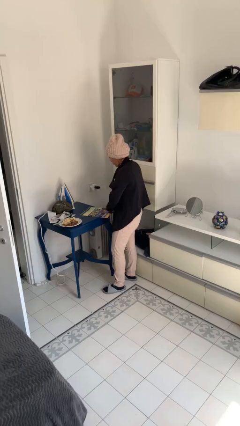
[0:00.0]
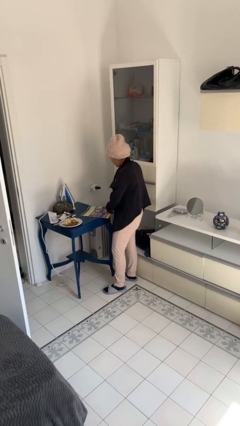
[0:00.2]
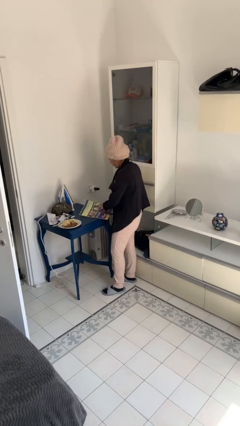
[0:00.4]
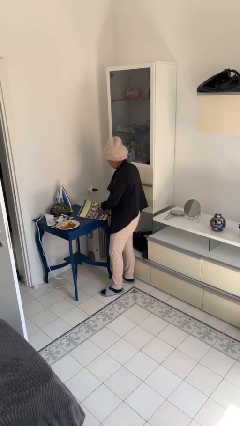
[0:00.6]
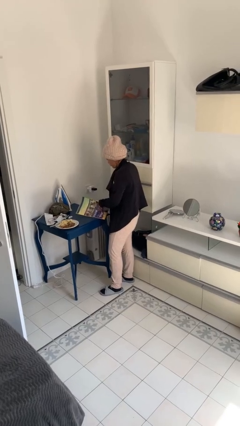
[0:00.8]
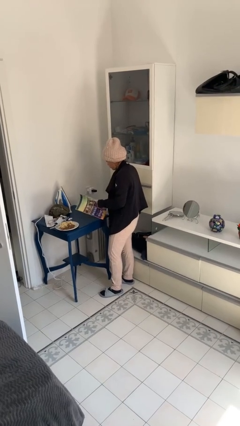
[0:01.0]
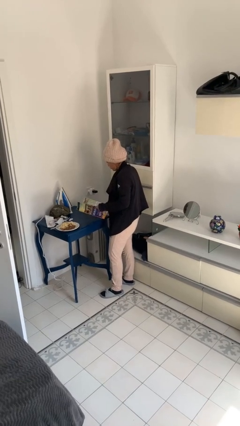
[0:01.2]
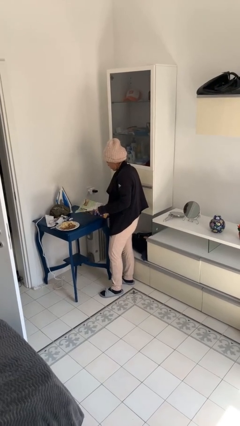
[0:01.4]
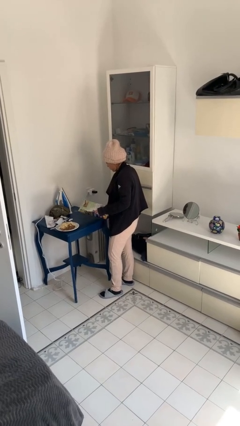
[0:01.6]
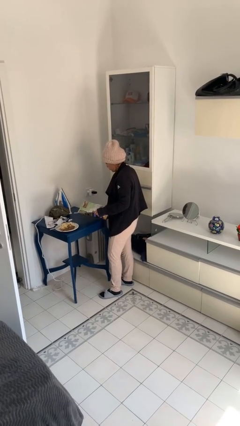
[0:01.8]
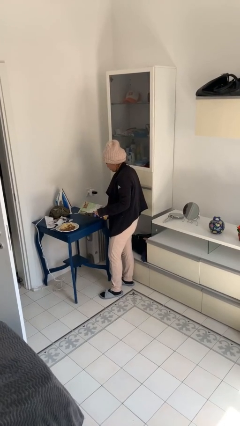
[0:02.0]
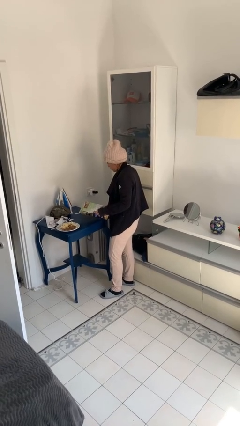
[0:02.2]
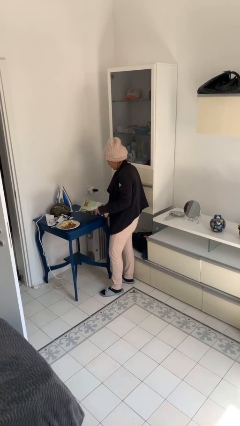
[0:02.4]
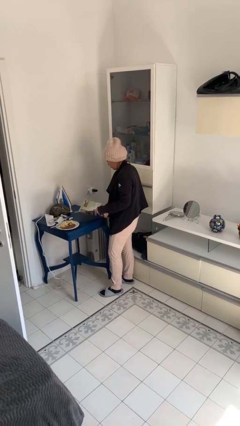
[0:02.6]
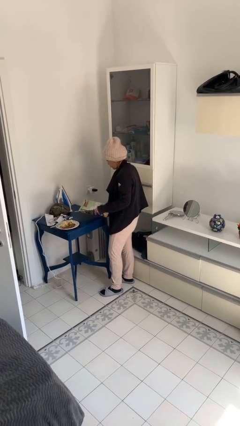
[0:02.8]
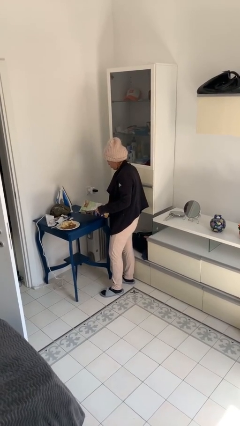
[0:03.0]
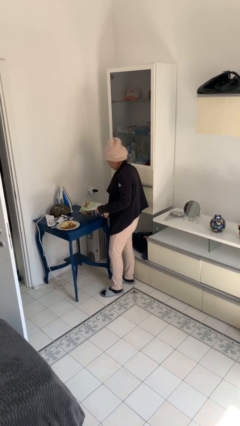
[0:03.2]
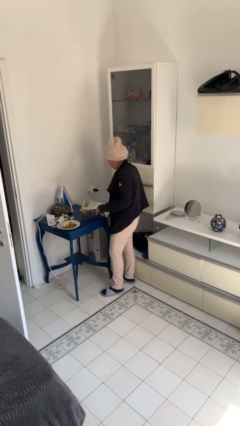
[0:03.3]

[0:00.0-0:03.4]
person reads magazine

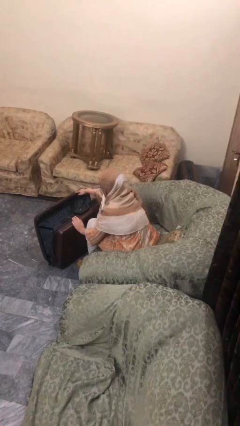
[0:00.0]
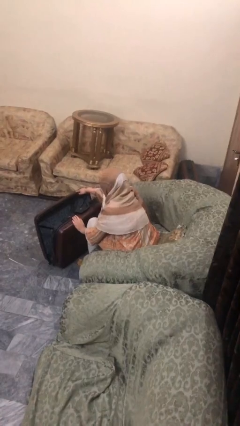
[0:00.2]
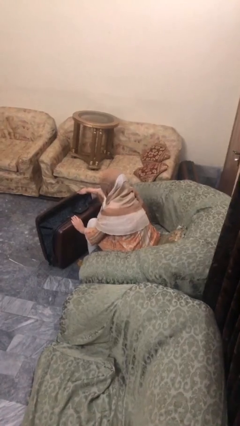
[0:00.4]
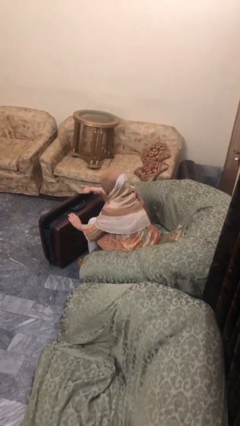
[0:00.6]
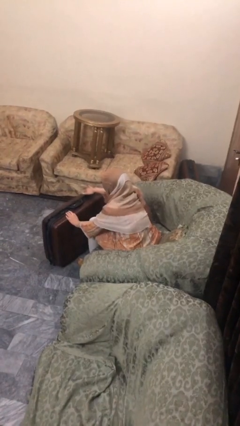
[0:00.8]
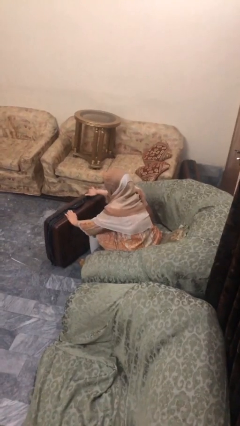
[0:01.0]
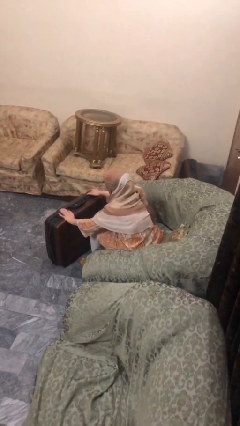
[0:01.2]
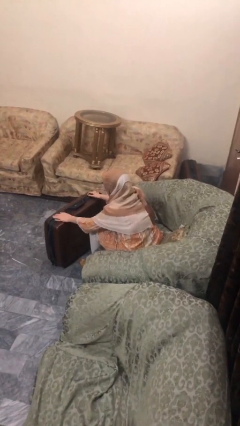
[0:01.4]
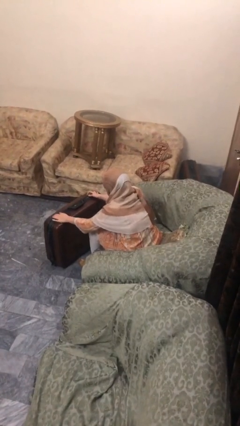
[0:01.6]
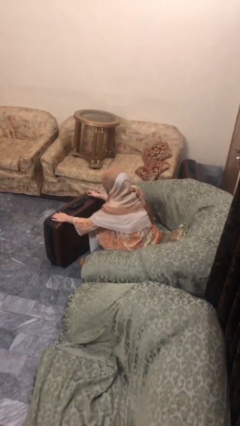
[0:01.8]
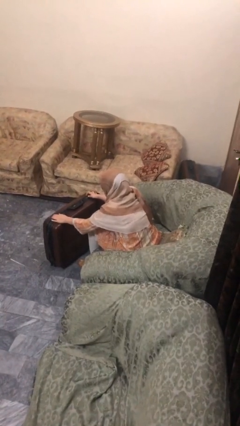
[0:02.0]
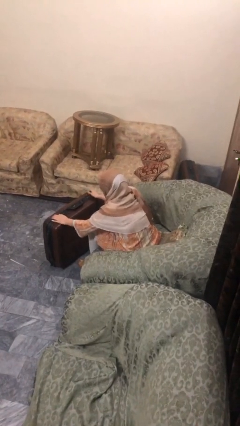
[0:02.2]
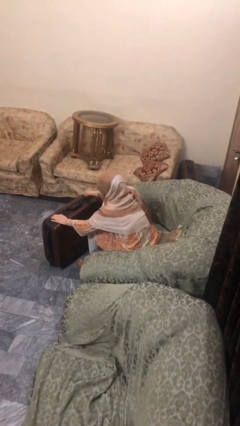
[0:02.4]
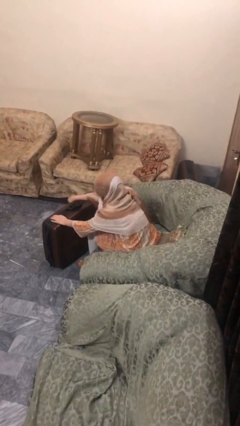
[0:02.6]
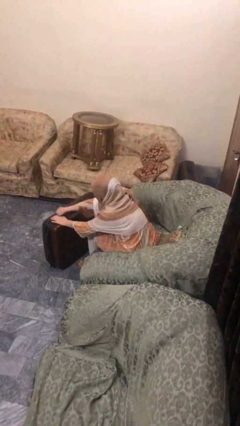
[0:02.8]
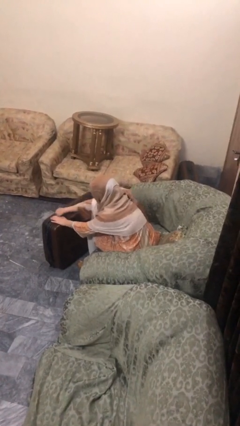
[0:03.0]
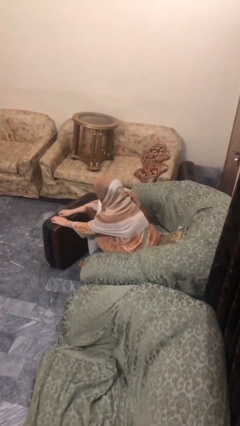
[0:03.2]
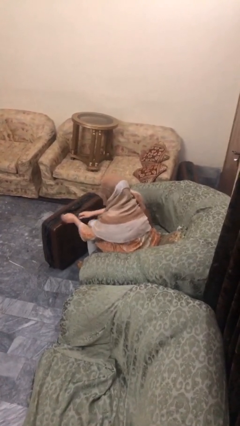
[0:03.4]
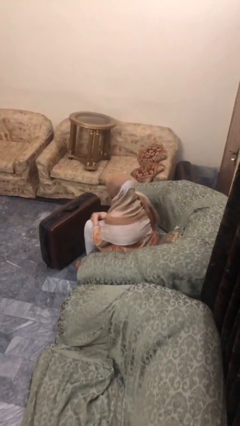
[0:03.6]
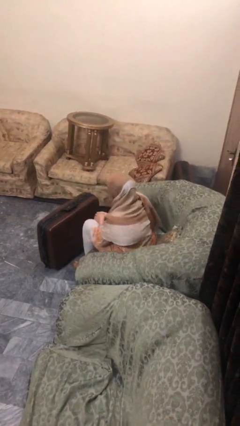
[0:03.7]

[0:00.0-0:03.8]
person closes suitcase

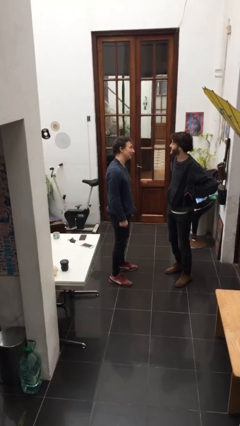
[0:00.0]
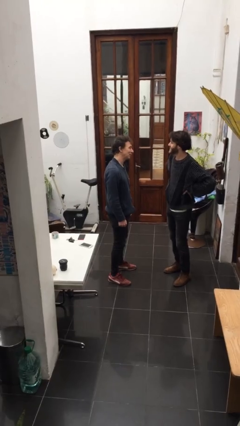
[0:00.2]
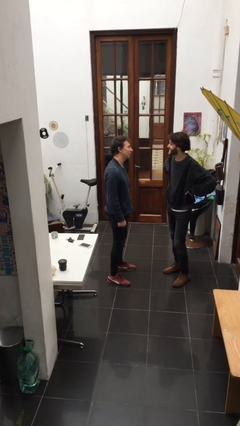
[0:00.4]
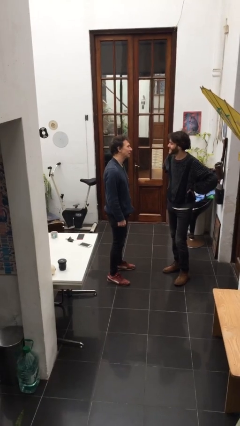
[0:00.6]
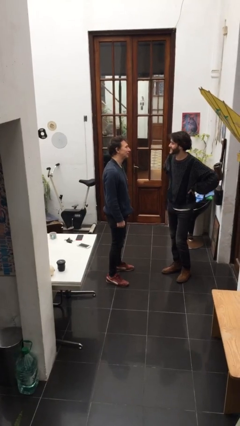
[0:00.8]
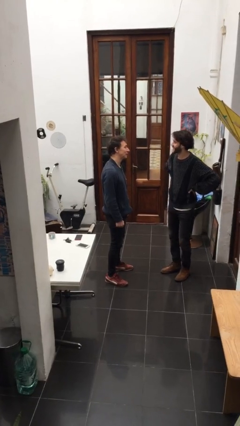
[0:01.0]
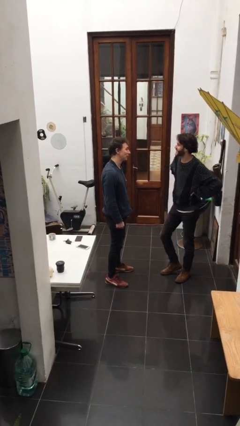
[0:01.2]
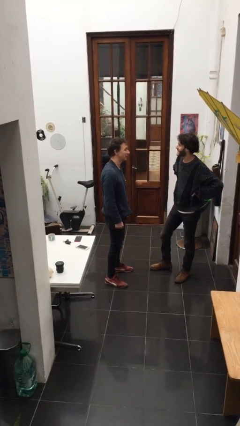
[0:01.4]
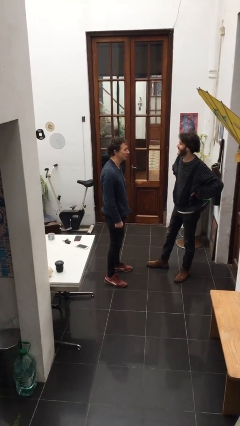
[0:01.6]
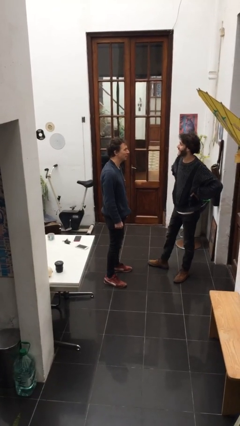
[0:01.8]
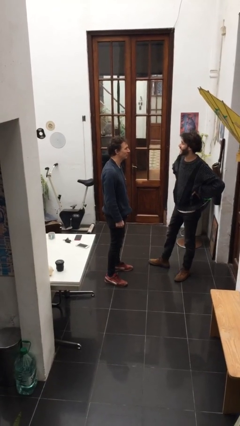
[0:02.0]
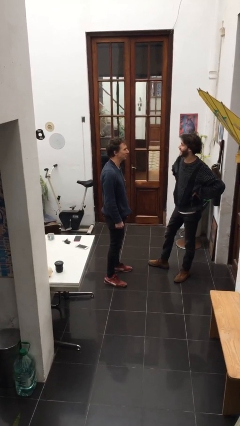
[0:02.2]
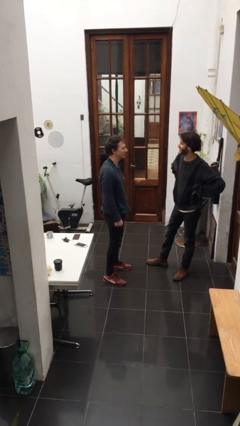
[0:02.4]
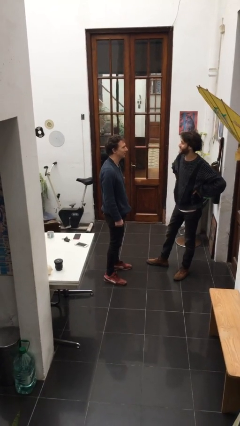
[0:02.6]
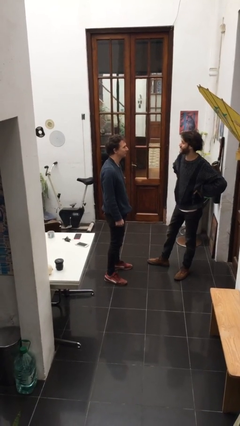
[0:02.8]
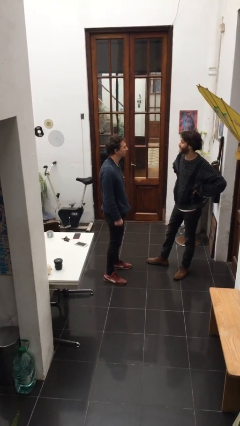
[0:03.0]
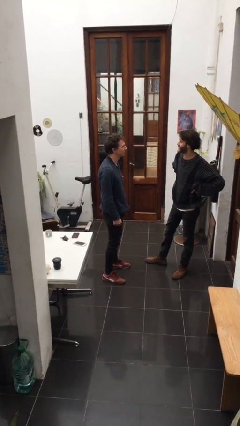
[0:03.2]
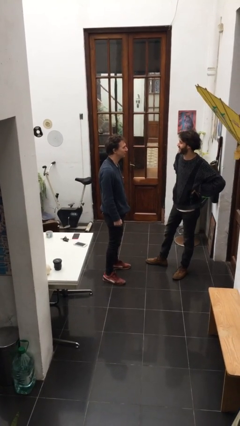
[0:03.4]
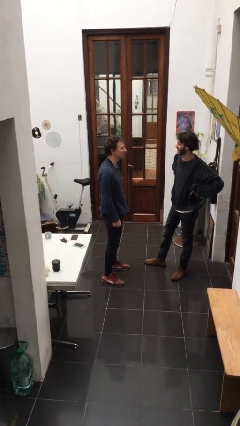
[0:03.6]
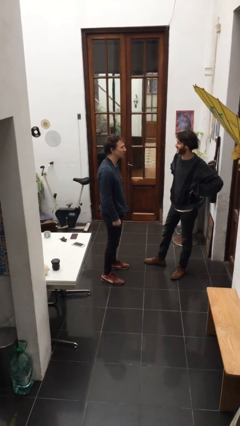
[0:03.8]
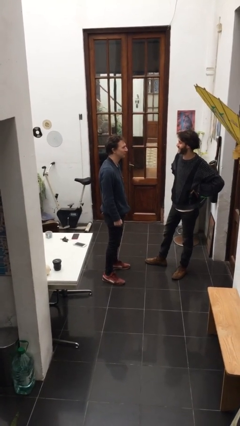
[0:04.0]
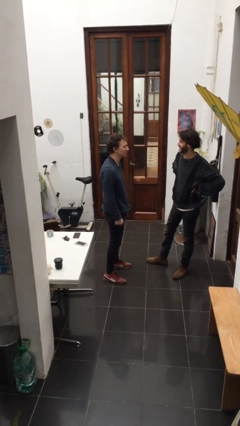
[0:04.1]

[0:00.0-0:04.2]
person talks to person

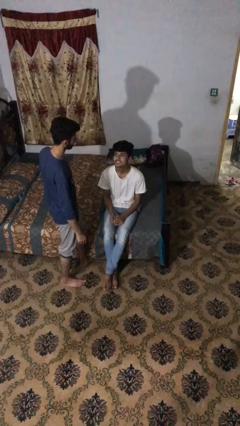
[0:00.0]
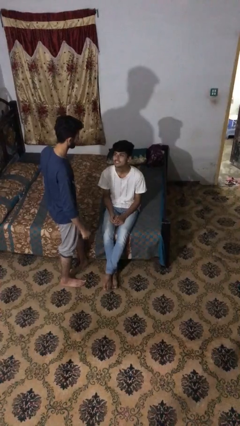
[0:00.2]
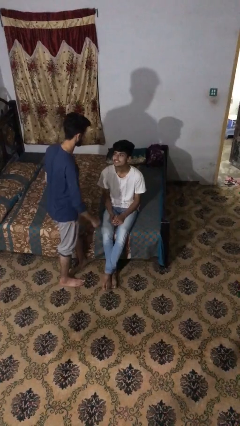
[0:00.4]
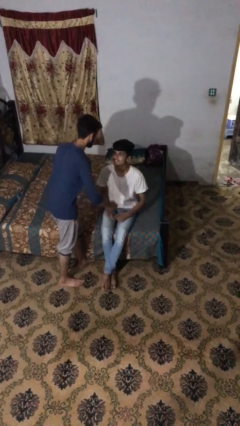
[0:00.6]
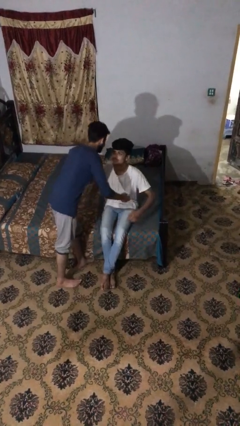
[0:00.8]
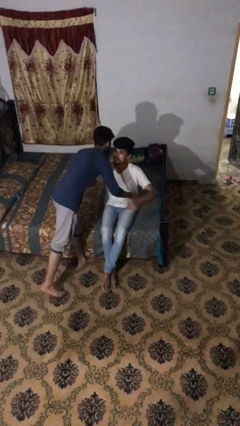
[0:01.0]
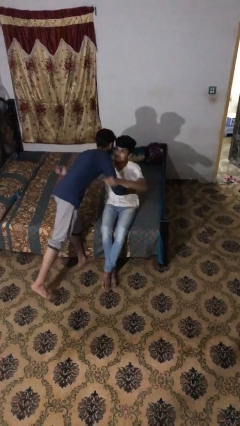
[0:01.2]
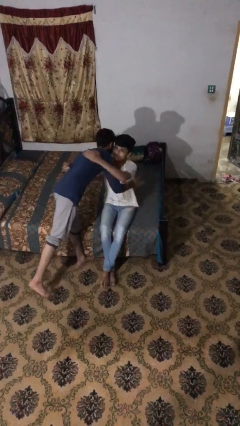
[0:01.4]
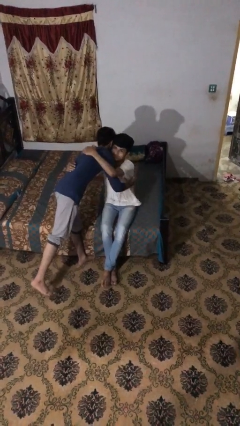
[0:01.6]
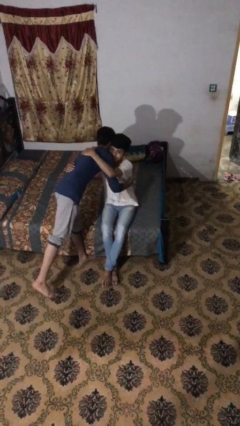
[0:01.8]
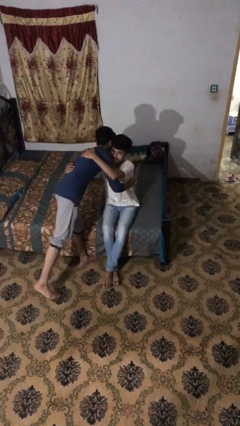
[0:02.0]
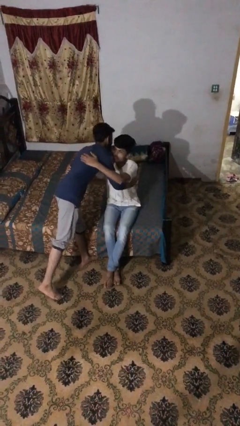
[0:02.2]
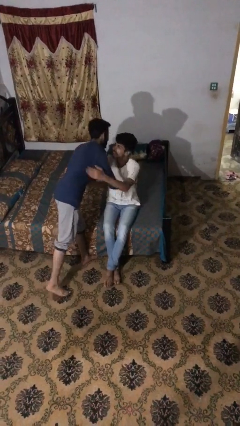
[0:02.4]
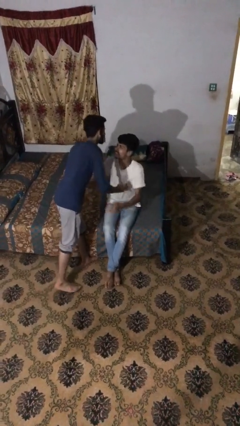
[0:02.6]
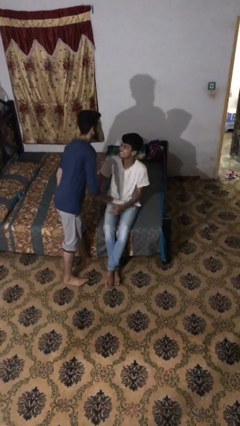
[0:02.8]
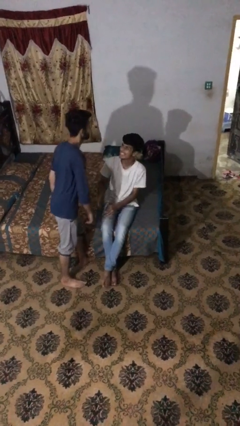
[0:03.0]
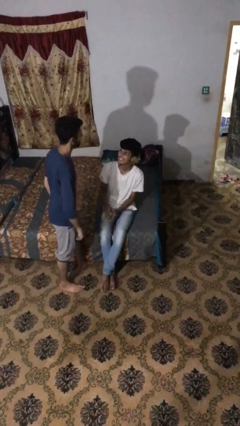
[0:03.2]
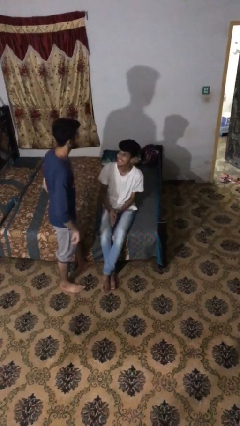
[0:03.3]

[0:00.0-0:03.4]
person embraces person

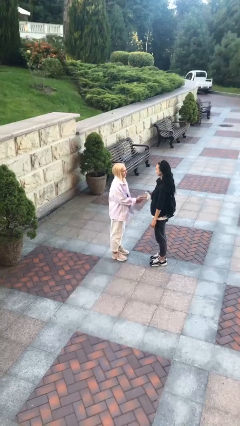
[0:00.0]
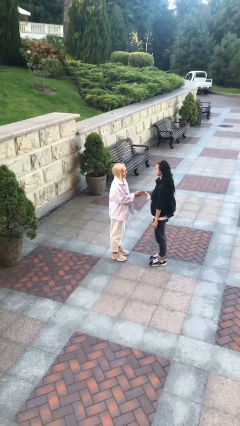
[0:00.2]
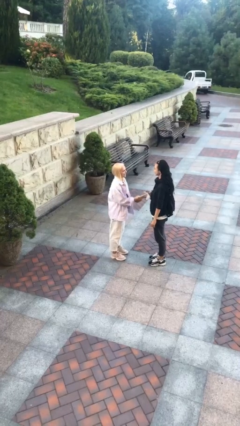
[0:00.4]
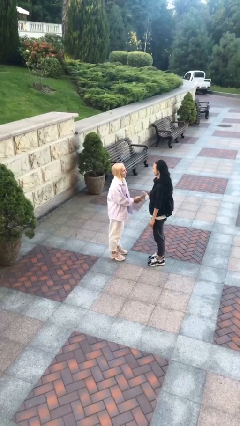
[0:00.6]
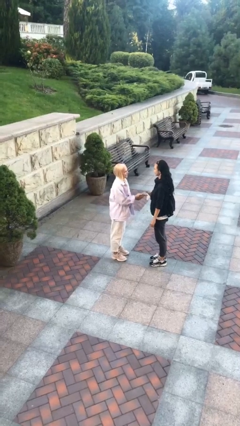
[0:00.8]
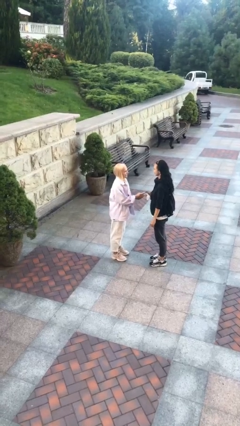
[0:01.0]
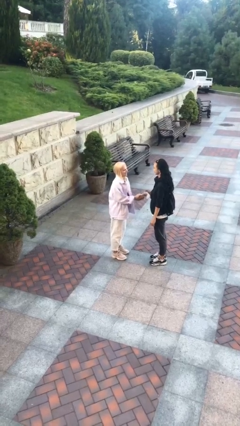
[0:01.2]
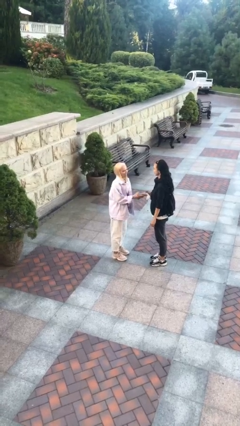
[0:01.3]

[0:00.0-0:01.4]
person shakes hand

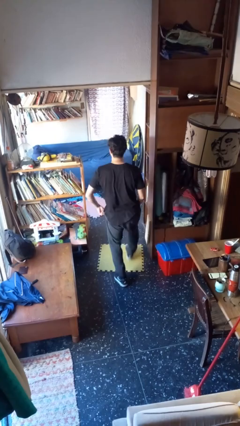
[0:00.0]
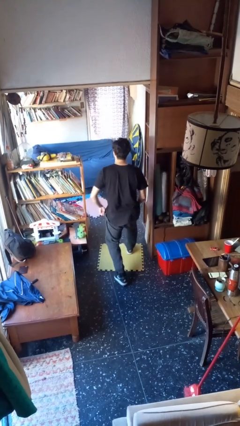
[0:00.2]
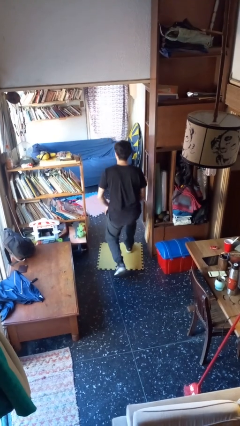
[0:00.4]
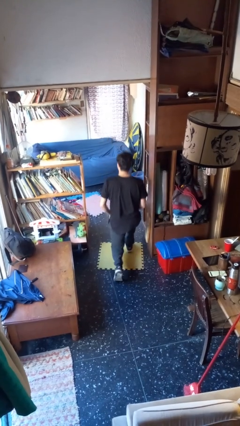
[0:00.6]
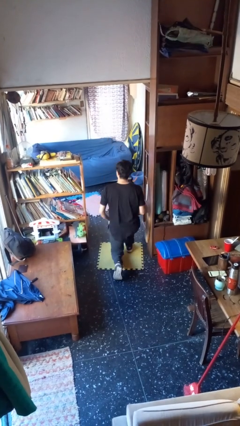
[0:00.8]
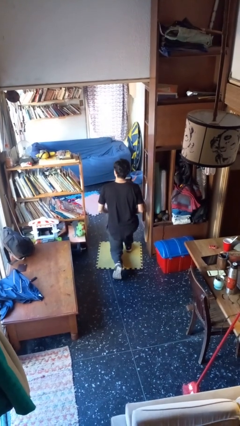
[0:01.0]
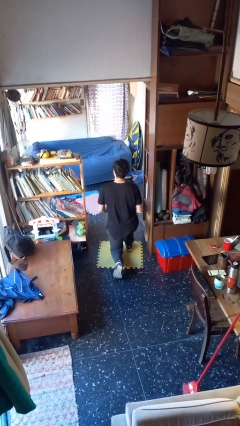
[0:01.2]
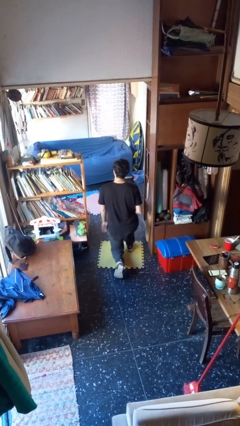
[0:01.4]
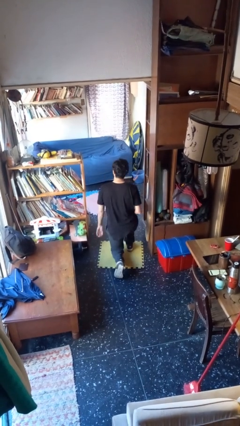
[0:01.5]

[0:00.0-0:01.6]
person kneels
